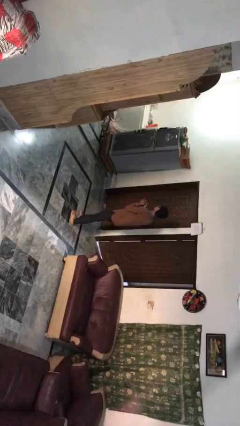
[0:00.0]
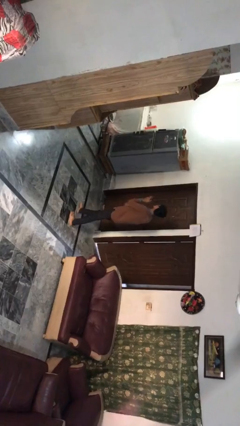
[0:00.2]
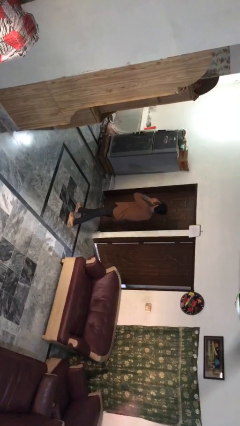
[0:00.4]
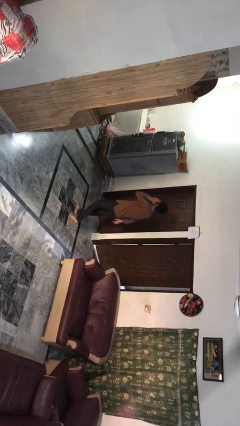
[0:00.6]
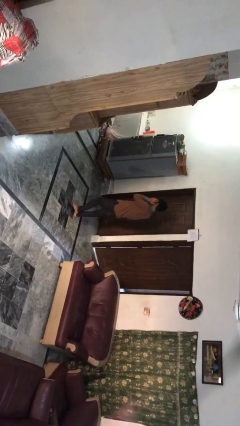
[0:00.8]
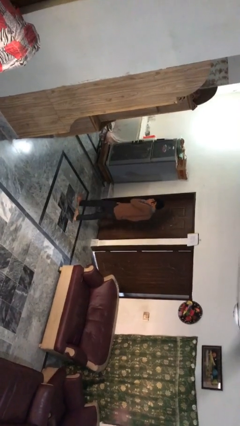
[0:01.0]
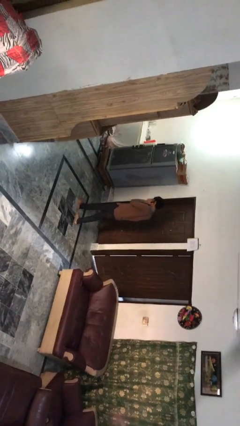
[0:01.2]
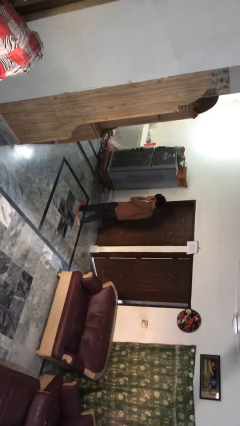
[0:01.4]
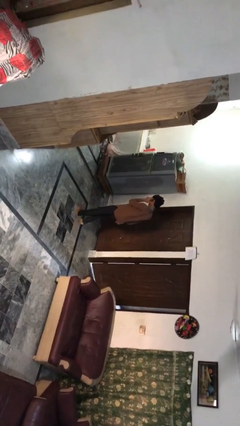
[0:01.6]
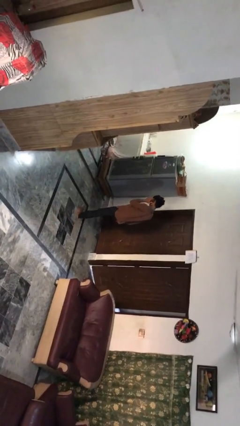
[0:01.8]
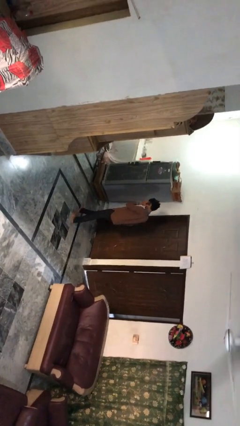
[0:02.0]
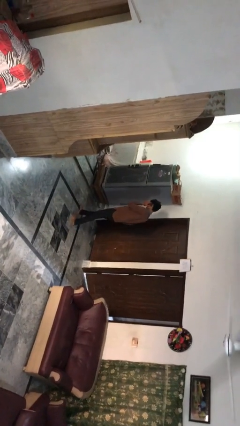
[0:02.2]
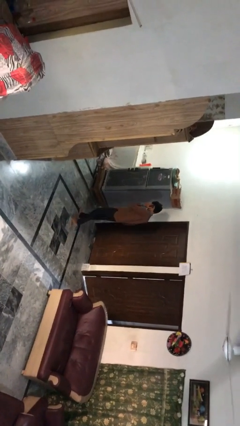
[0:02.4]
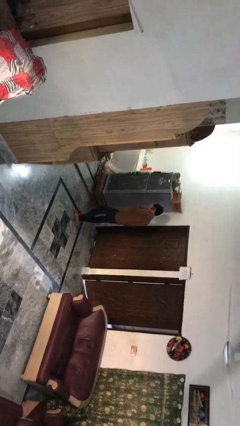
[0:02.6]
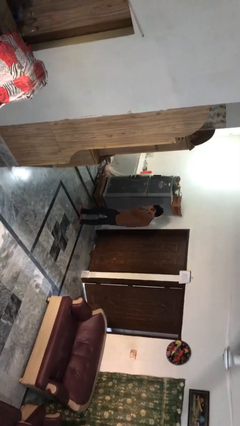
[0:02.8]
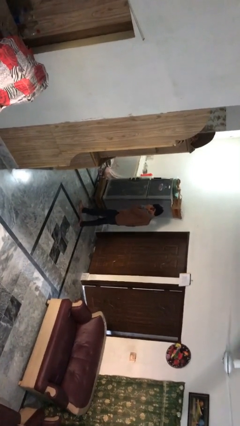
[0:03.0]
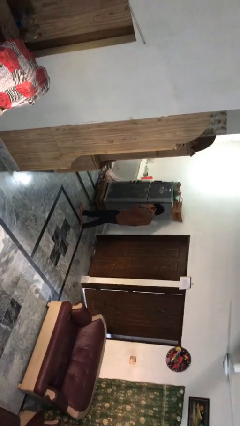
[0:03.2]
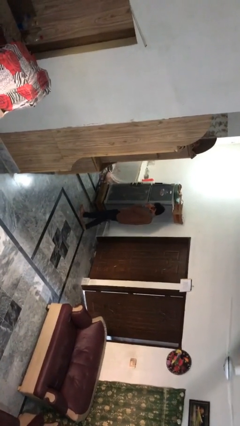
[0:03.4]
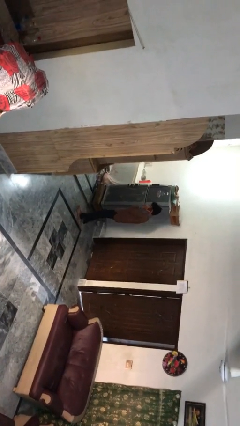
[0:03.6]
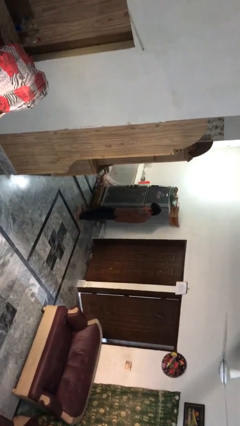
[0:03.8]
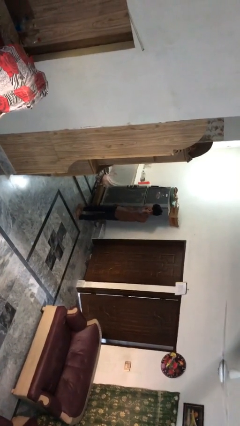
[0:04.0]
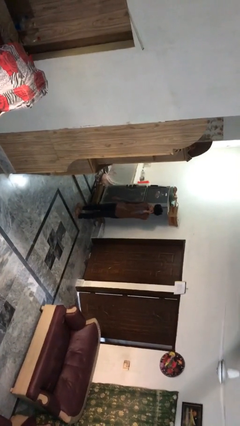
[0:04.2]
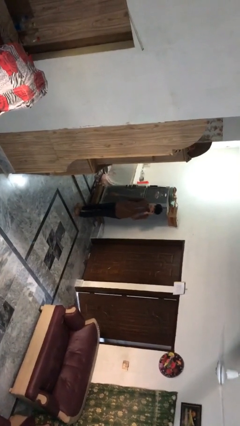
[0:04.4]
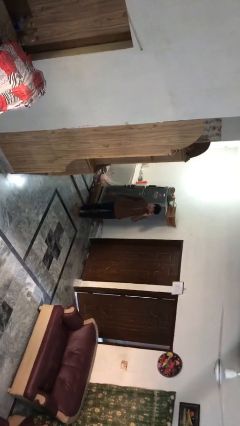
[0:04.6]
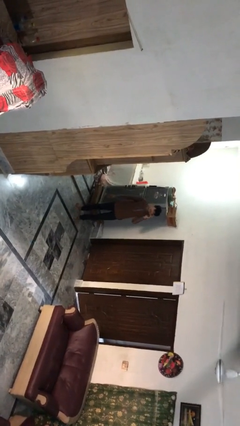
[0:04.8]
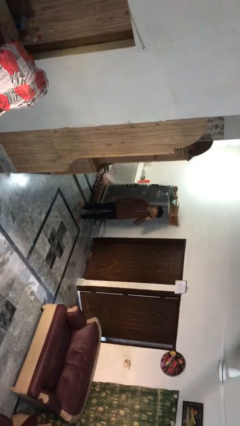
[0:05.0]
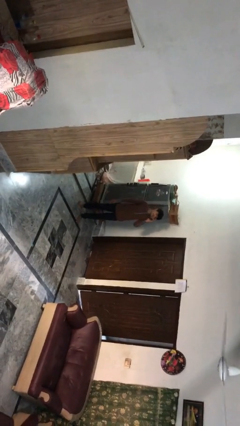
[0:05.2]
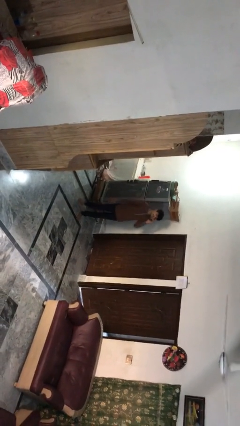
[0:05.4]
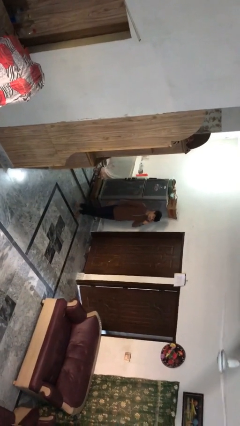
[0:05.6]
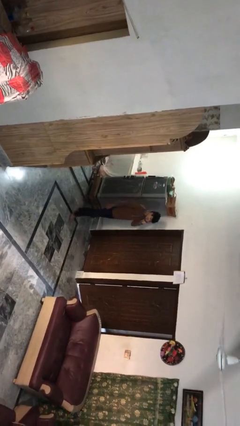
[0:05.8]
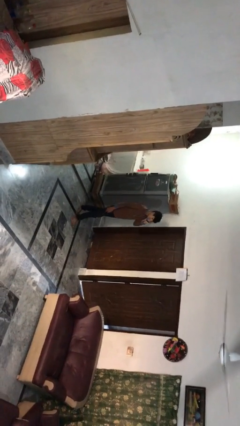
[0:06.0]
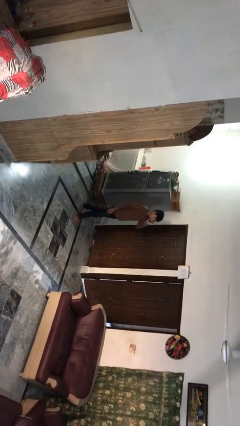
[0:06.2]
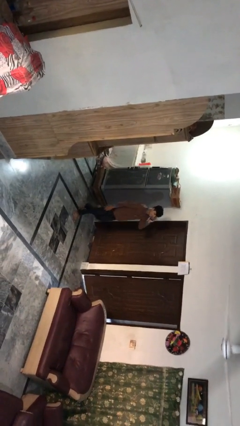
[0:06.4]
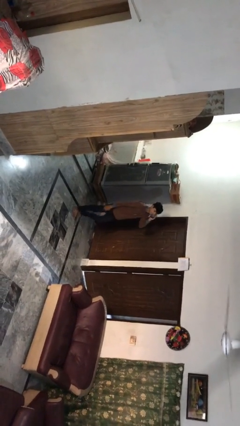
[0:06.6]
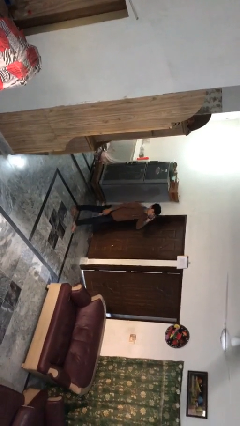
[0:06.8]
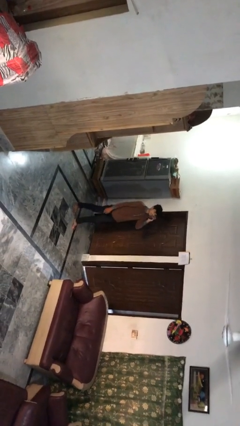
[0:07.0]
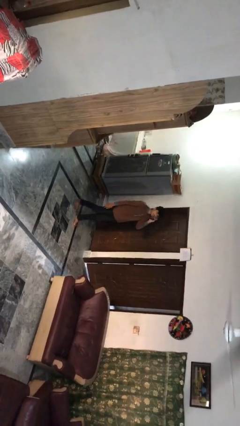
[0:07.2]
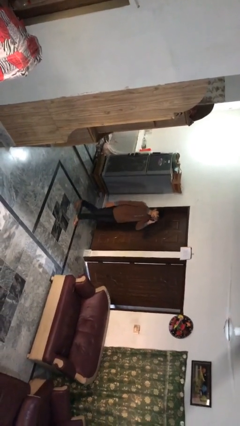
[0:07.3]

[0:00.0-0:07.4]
person talks on phone

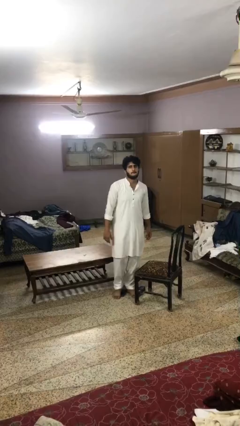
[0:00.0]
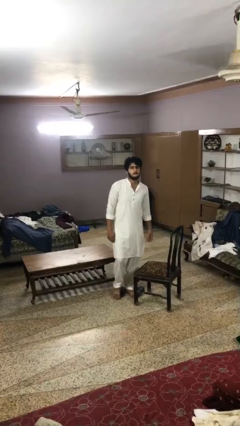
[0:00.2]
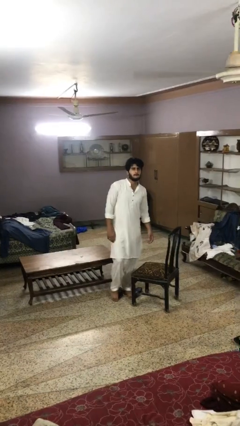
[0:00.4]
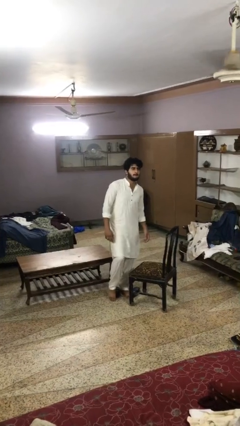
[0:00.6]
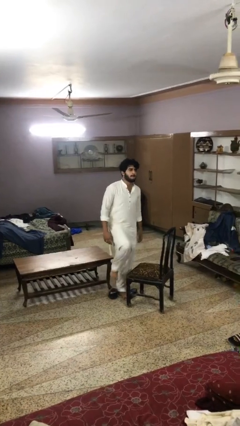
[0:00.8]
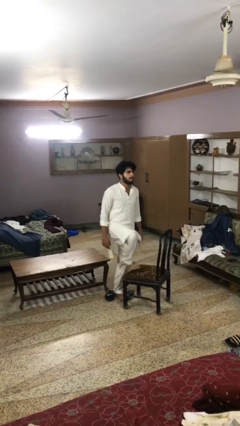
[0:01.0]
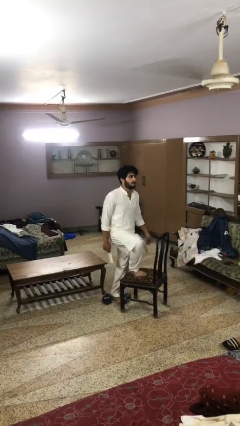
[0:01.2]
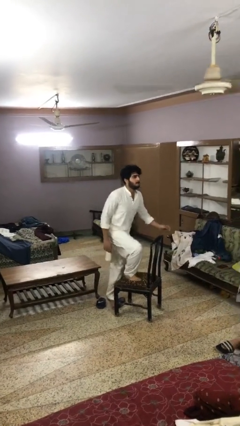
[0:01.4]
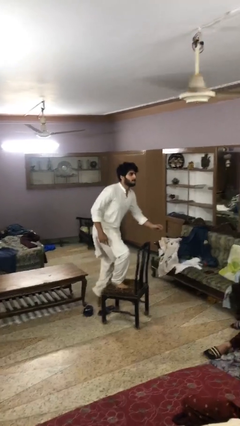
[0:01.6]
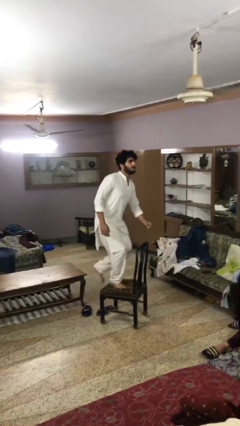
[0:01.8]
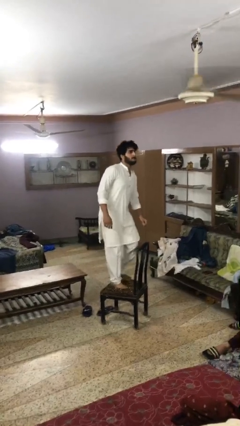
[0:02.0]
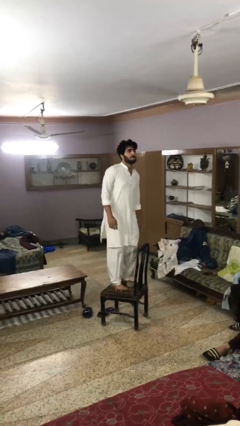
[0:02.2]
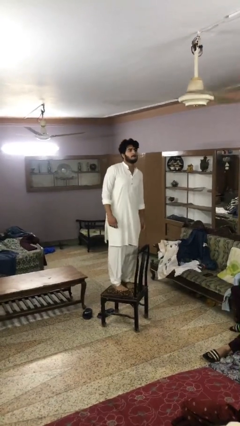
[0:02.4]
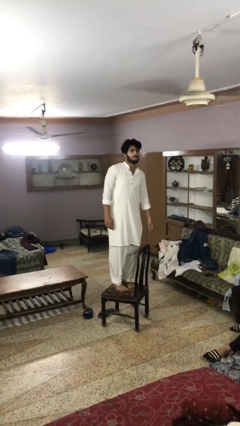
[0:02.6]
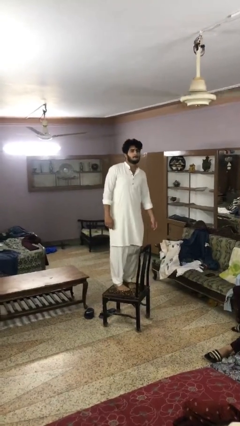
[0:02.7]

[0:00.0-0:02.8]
person climbs on chair

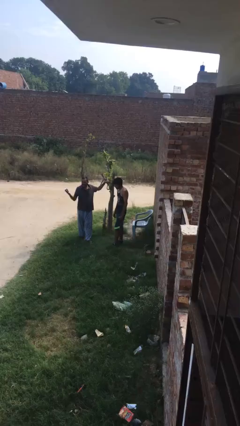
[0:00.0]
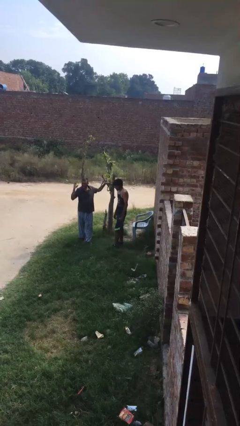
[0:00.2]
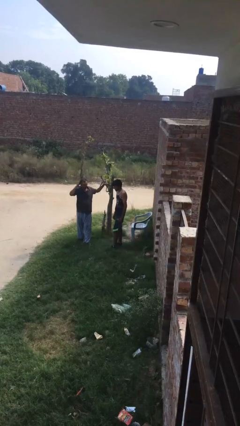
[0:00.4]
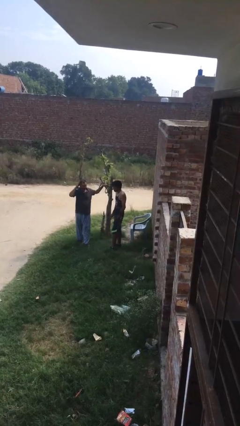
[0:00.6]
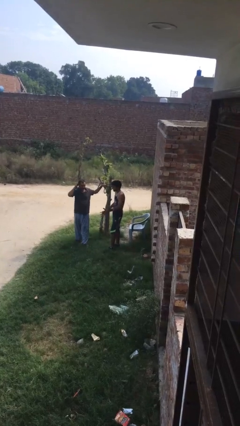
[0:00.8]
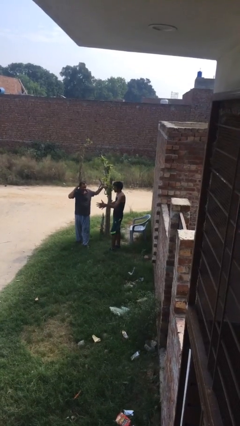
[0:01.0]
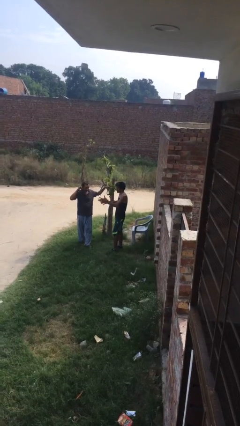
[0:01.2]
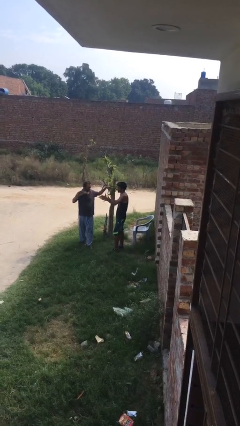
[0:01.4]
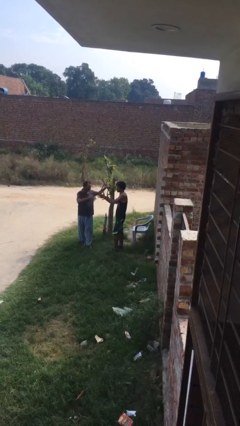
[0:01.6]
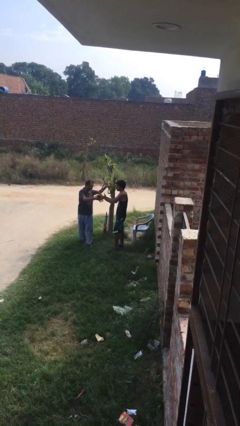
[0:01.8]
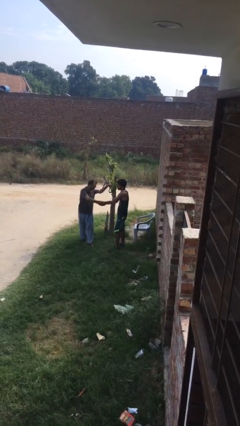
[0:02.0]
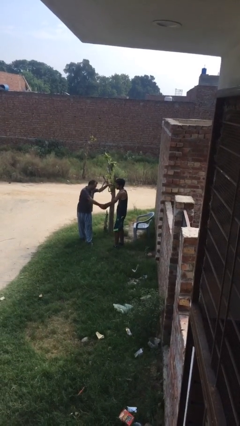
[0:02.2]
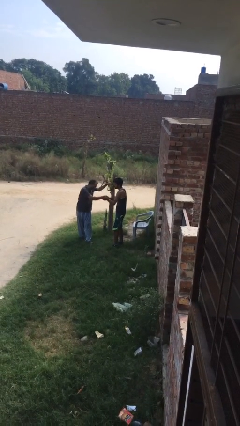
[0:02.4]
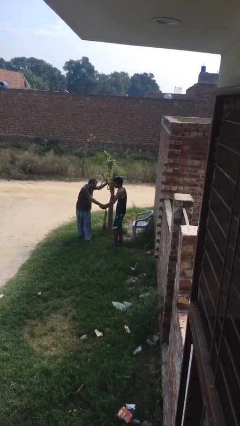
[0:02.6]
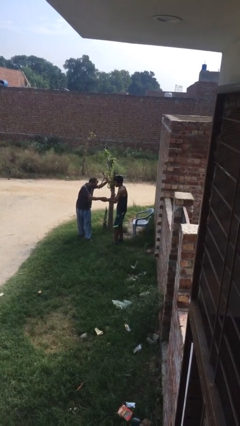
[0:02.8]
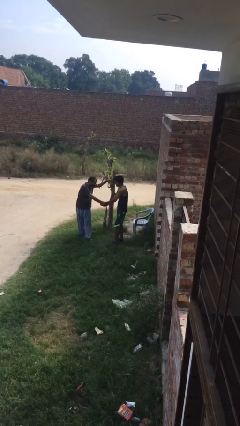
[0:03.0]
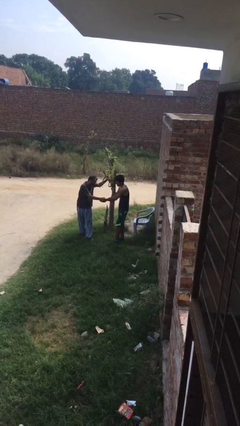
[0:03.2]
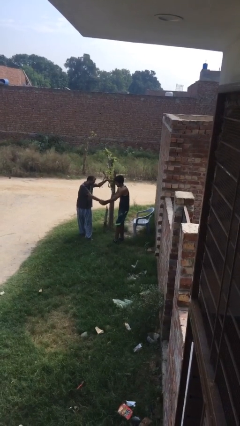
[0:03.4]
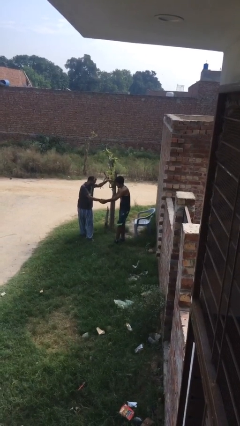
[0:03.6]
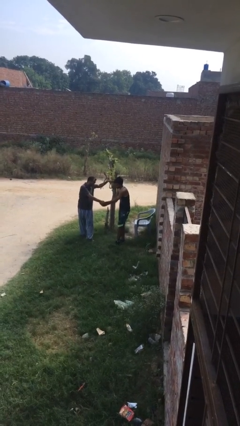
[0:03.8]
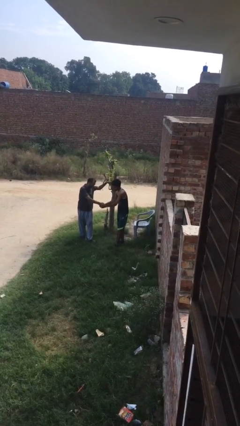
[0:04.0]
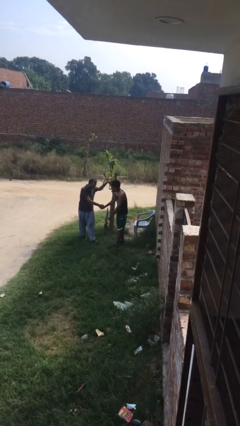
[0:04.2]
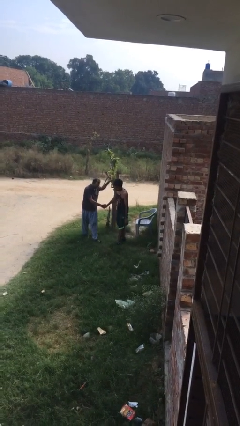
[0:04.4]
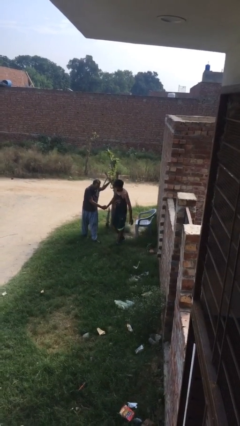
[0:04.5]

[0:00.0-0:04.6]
person shakes hand

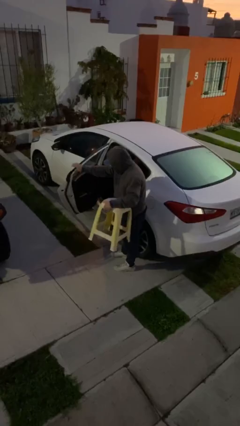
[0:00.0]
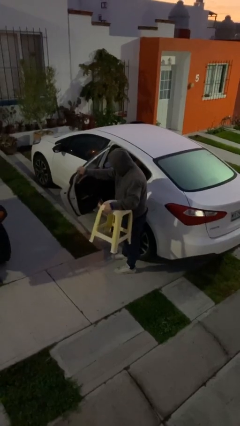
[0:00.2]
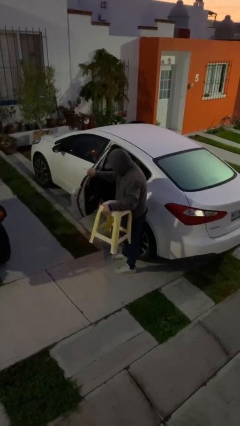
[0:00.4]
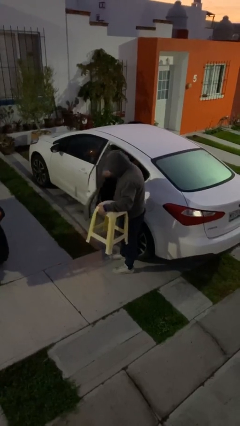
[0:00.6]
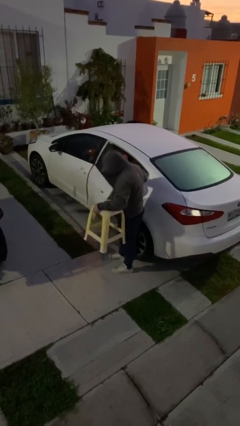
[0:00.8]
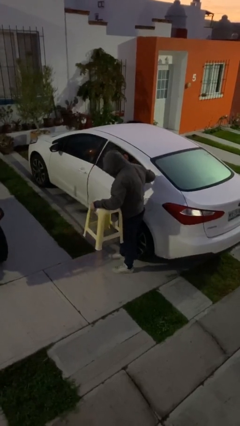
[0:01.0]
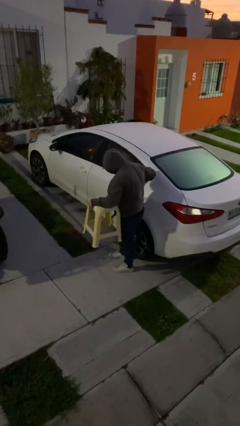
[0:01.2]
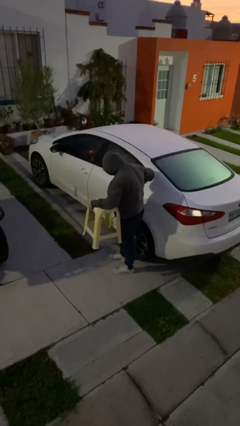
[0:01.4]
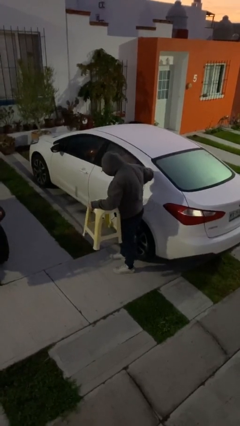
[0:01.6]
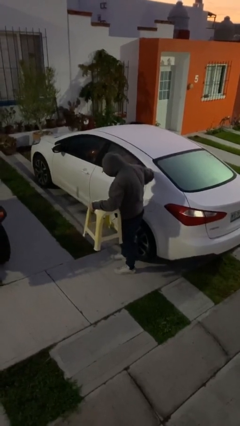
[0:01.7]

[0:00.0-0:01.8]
person closes car door

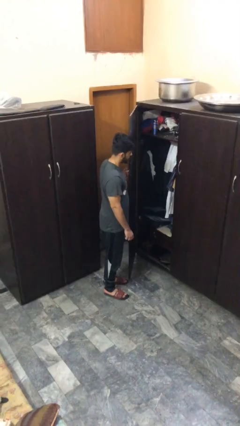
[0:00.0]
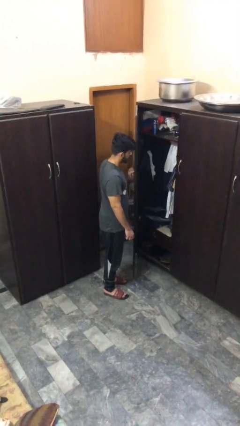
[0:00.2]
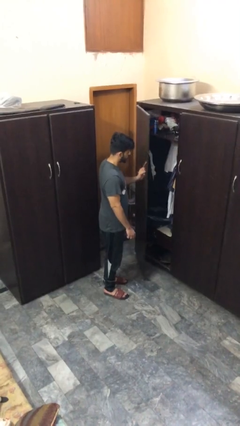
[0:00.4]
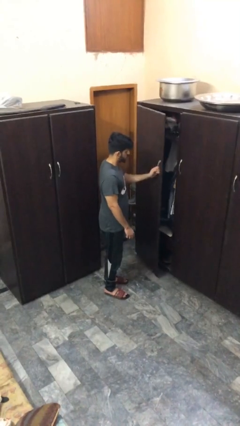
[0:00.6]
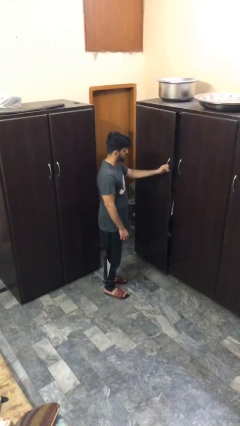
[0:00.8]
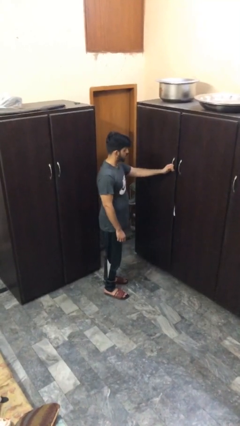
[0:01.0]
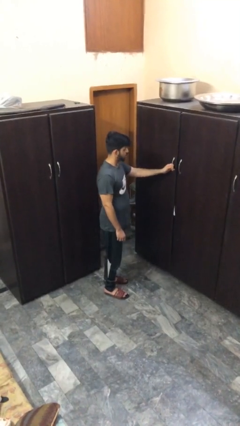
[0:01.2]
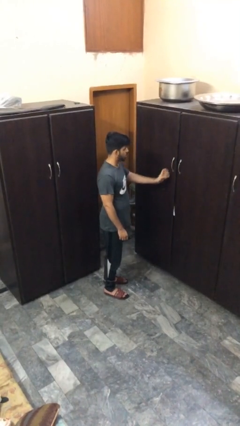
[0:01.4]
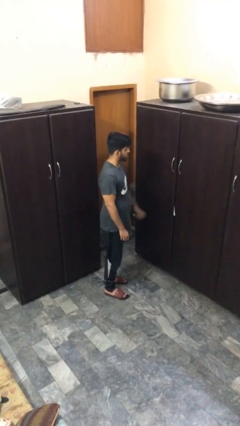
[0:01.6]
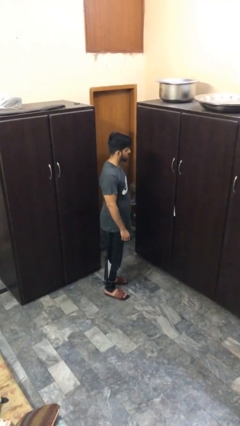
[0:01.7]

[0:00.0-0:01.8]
person closes dresser drawer
